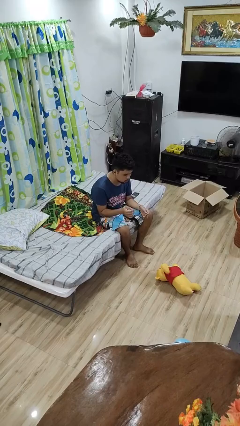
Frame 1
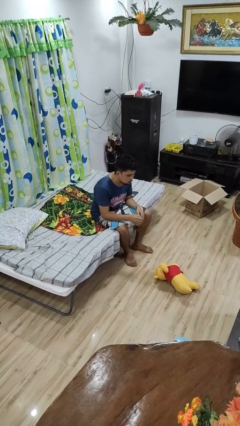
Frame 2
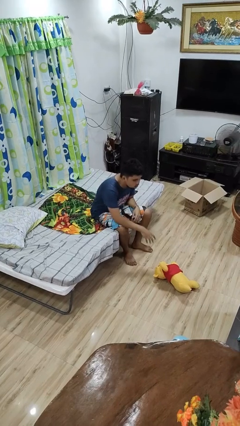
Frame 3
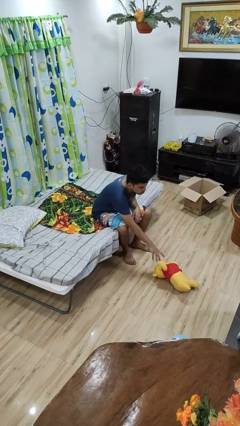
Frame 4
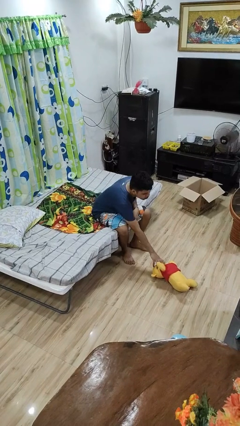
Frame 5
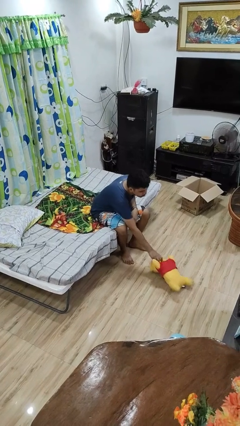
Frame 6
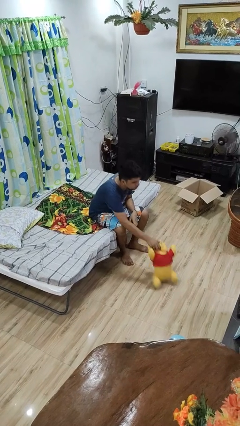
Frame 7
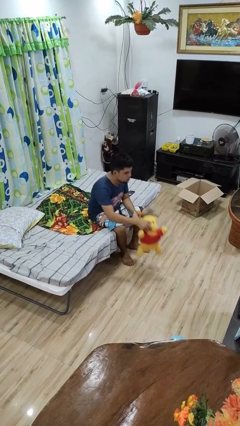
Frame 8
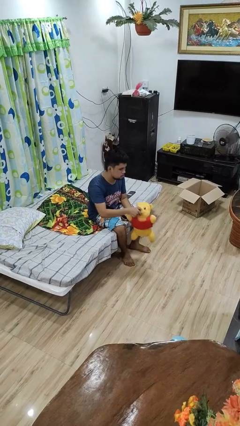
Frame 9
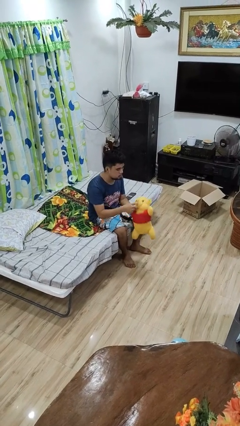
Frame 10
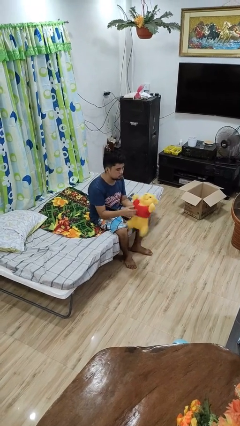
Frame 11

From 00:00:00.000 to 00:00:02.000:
person picks up object from floor

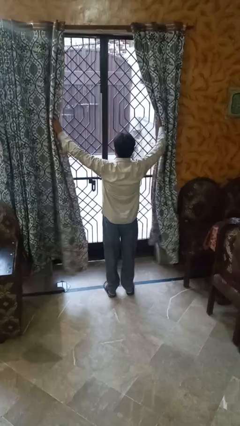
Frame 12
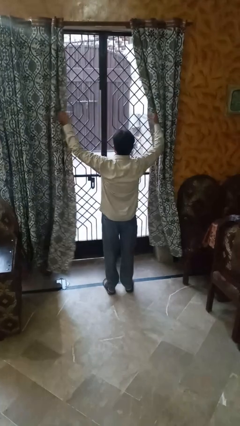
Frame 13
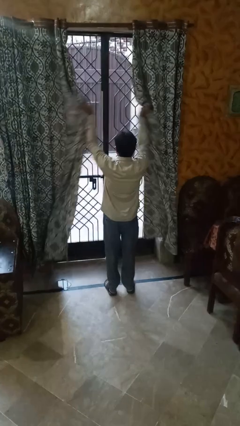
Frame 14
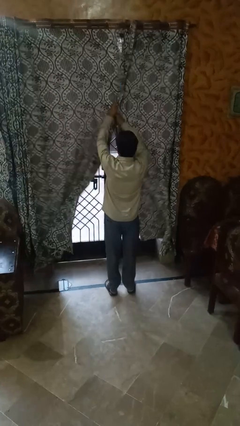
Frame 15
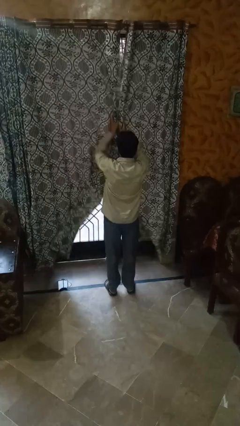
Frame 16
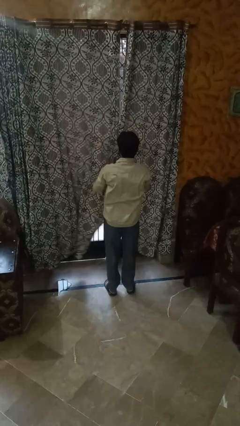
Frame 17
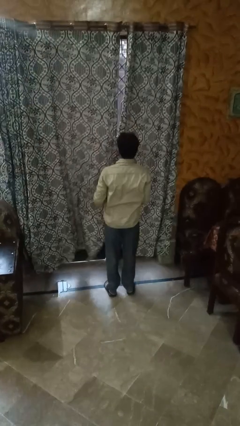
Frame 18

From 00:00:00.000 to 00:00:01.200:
person closes curtains

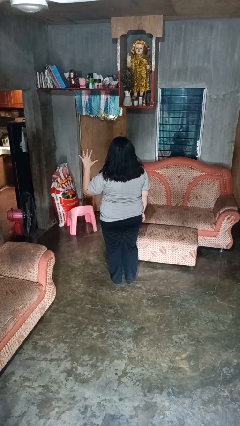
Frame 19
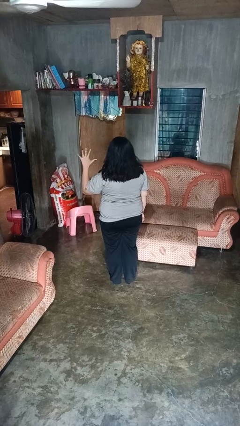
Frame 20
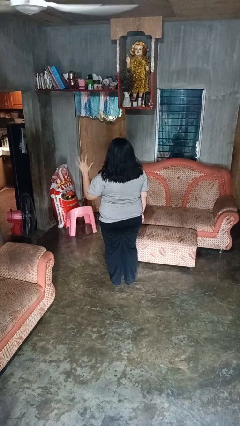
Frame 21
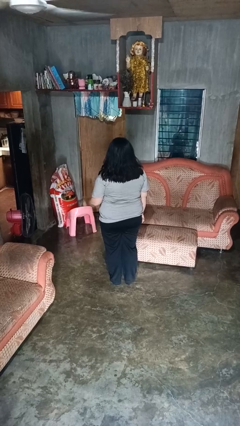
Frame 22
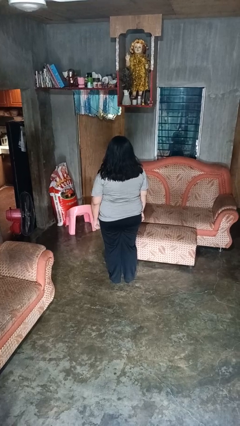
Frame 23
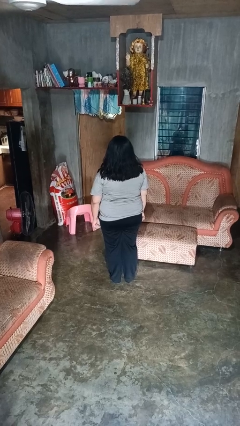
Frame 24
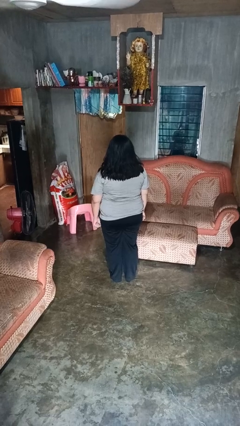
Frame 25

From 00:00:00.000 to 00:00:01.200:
person gestures number five

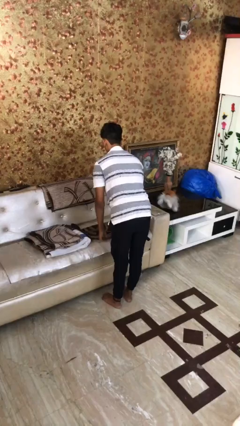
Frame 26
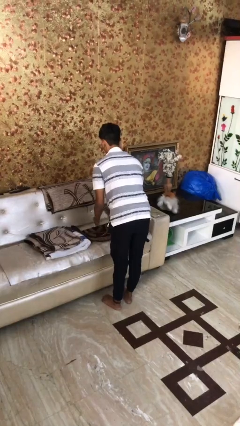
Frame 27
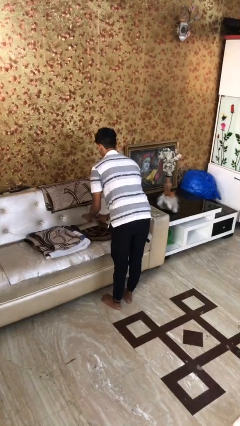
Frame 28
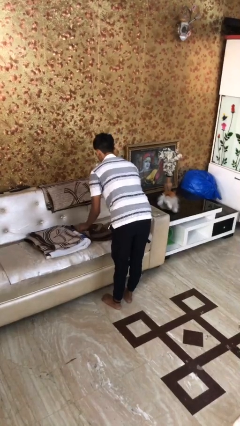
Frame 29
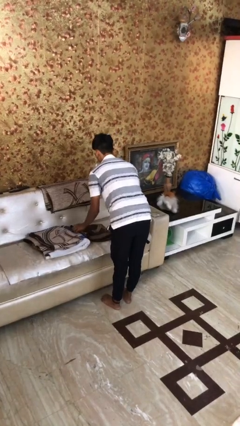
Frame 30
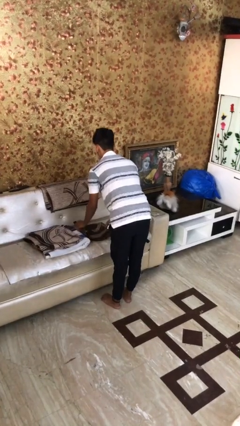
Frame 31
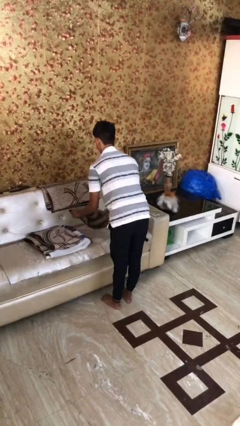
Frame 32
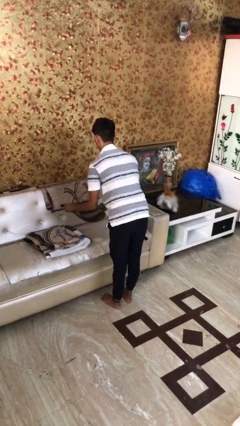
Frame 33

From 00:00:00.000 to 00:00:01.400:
person folds towel

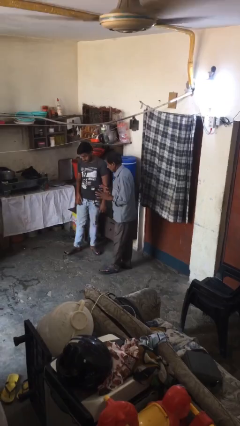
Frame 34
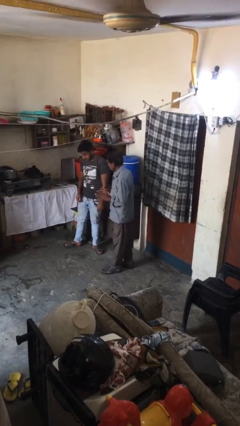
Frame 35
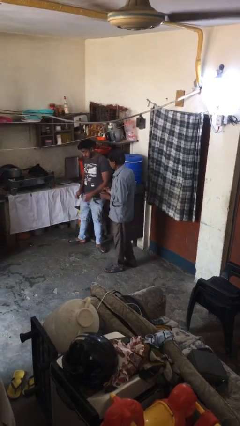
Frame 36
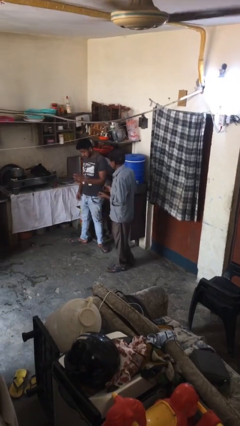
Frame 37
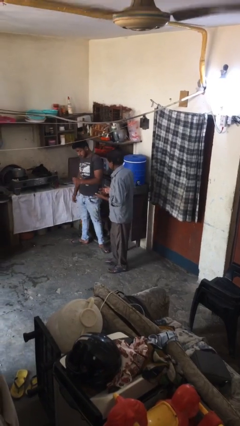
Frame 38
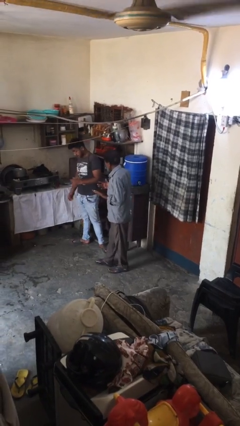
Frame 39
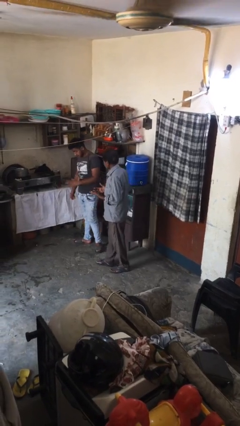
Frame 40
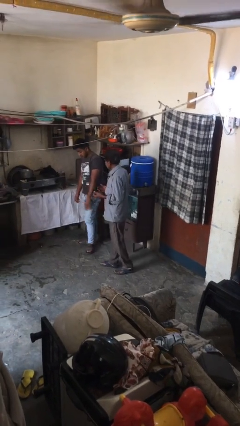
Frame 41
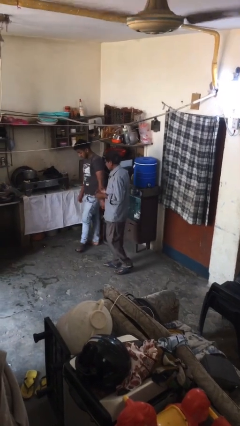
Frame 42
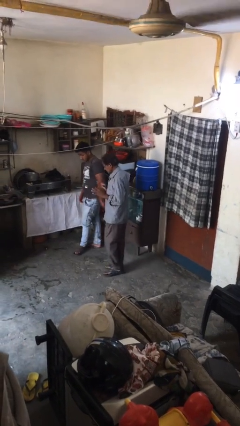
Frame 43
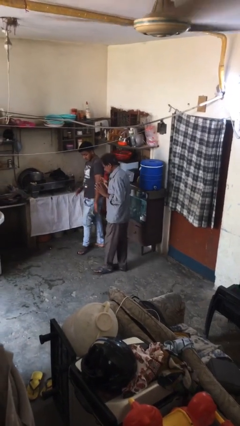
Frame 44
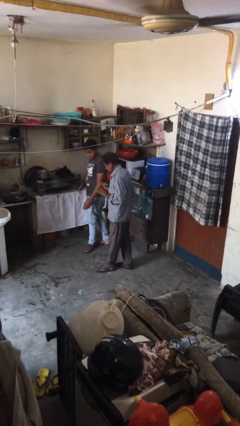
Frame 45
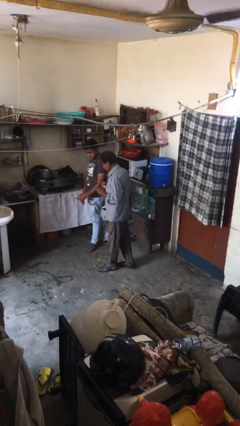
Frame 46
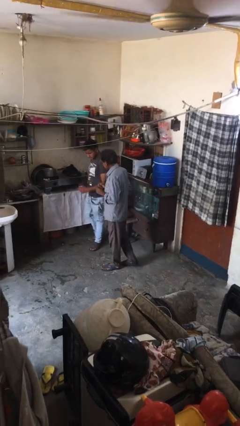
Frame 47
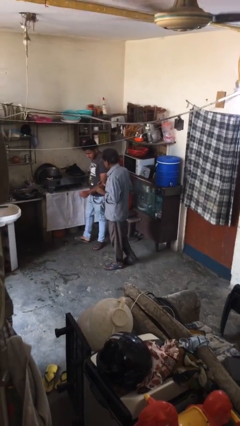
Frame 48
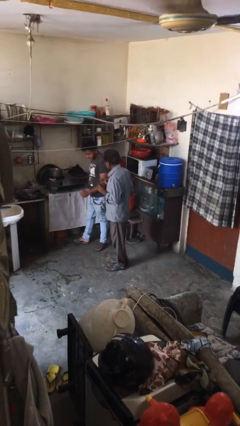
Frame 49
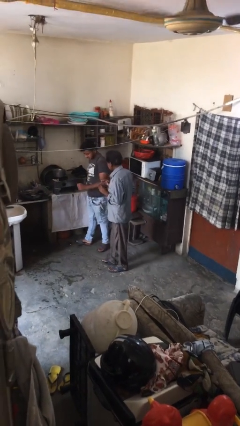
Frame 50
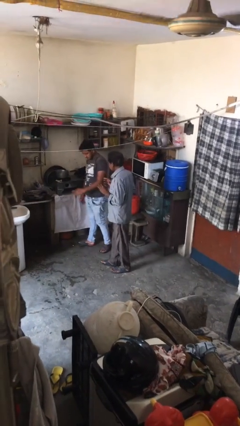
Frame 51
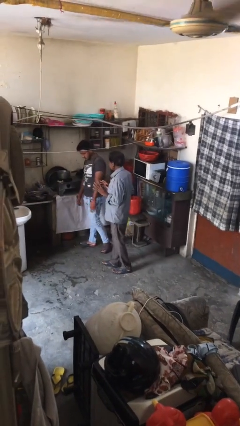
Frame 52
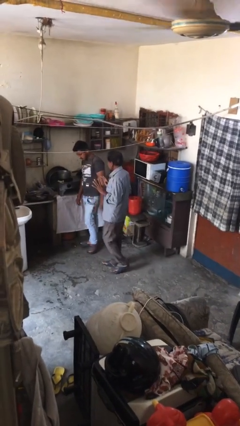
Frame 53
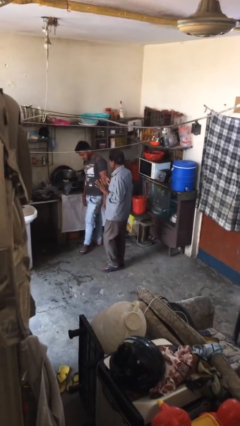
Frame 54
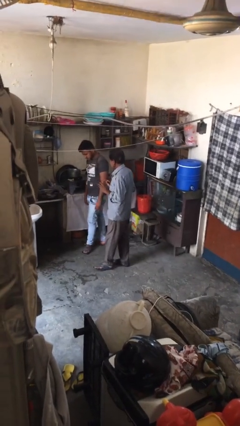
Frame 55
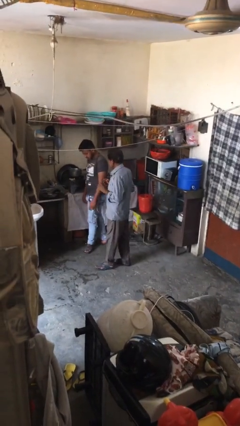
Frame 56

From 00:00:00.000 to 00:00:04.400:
person talks to person

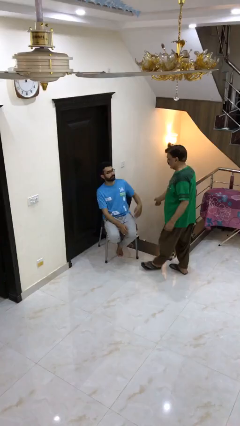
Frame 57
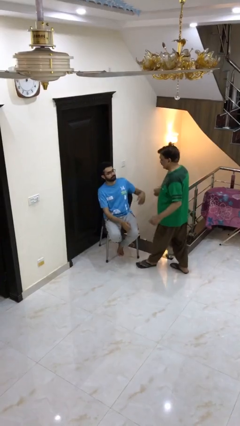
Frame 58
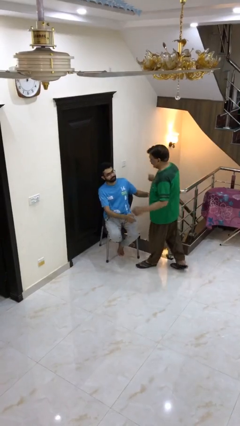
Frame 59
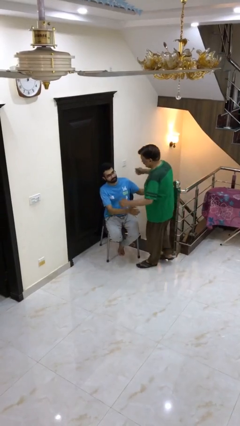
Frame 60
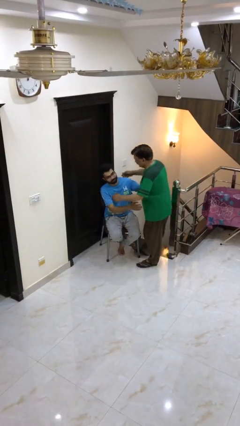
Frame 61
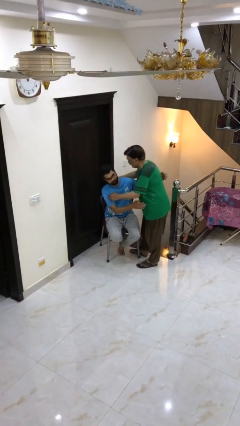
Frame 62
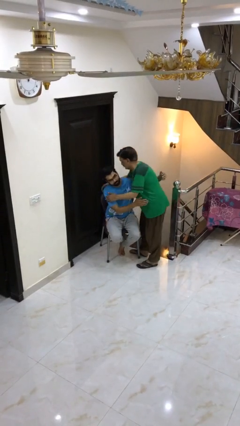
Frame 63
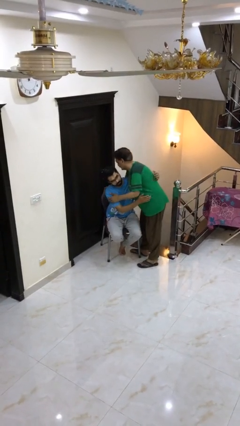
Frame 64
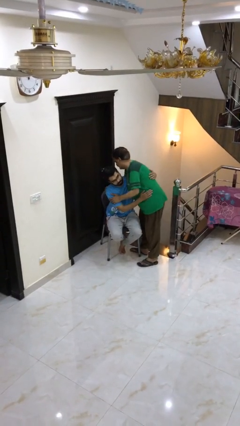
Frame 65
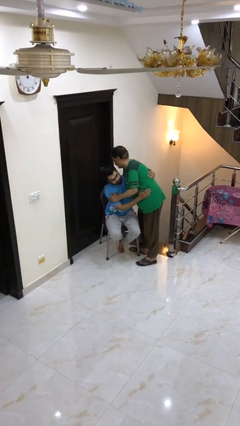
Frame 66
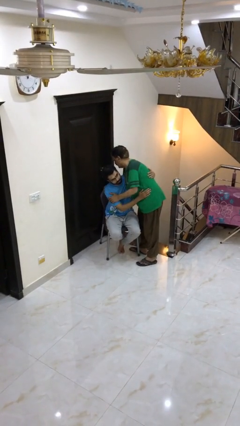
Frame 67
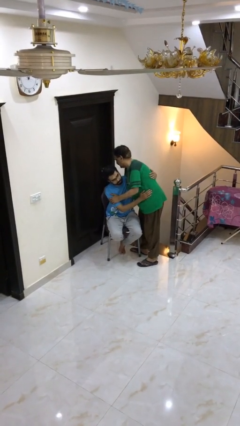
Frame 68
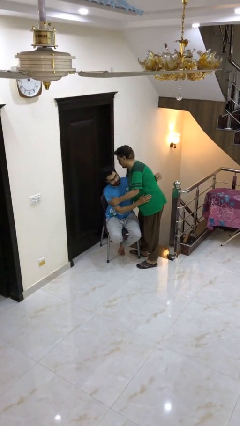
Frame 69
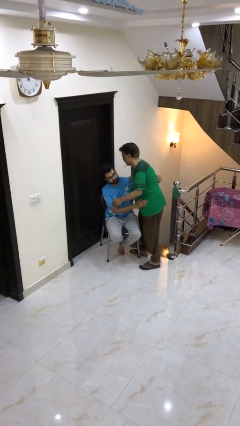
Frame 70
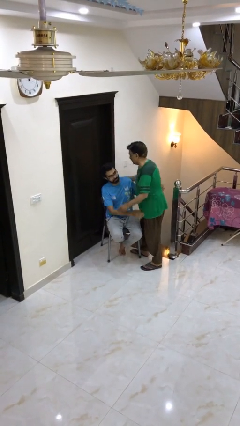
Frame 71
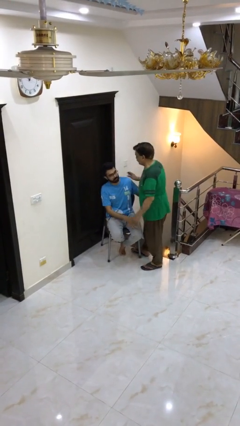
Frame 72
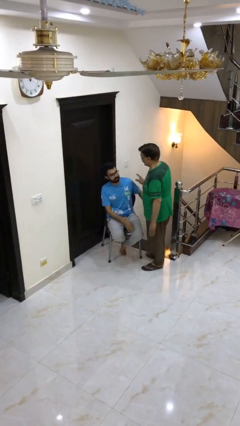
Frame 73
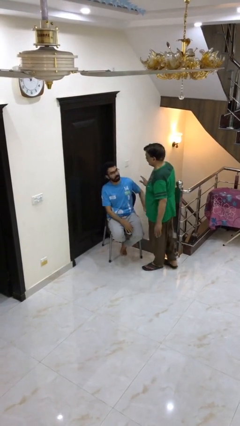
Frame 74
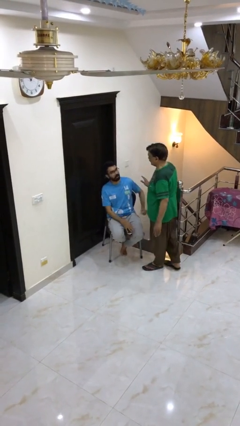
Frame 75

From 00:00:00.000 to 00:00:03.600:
person embraces person

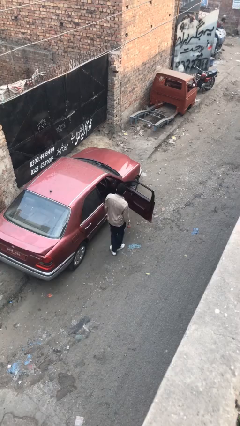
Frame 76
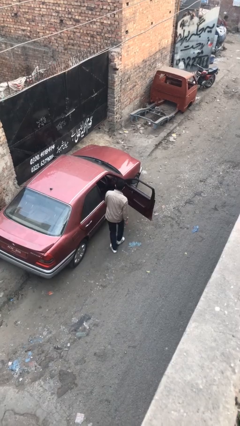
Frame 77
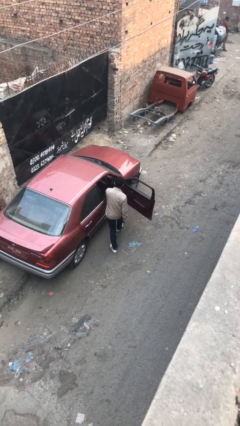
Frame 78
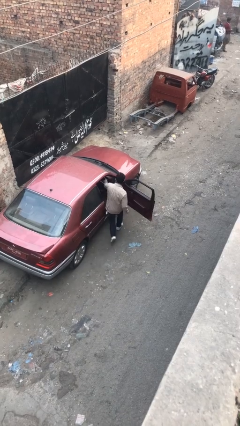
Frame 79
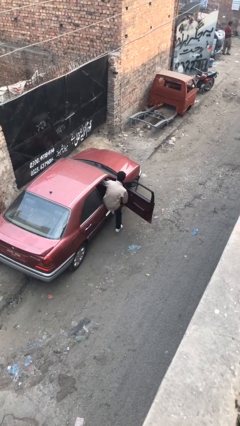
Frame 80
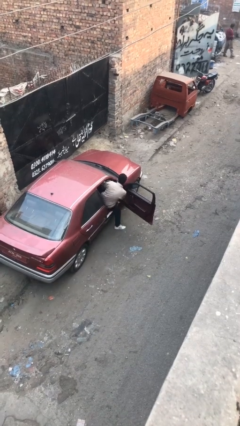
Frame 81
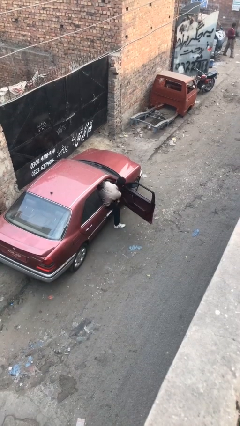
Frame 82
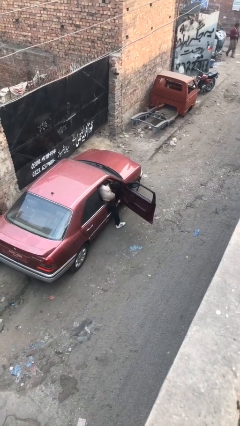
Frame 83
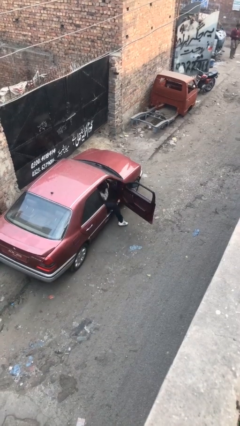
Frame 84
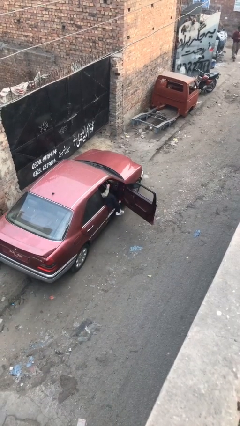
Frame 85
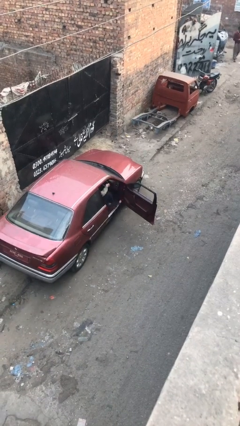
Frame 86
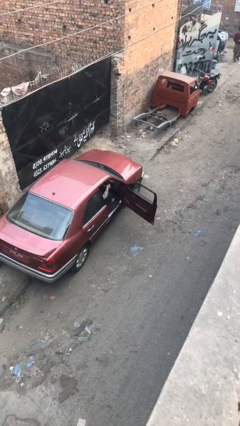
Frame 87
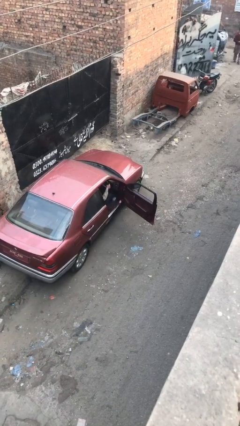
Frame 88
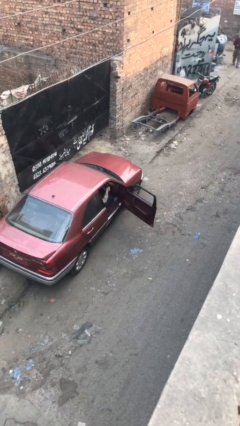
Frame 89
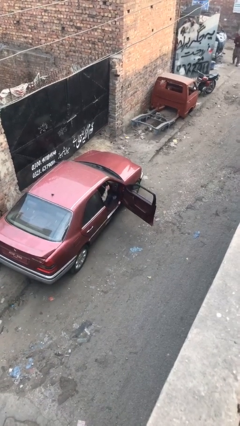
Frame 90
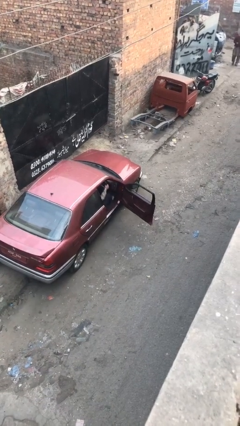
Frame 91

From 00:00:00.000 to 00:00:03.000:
person enters car

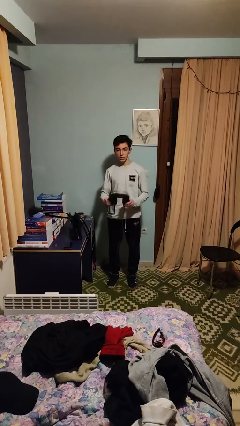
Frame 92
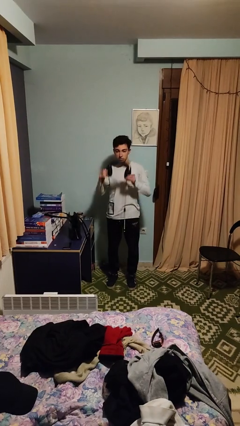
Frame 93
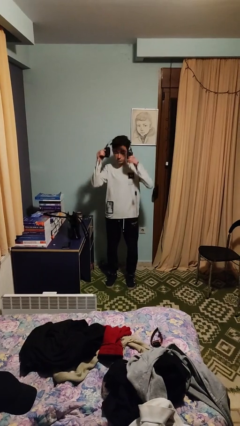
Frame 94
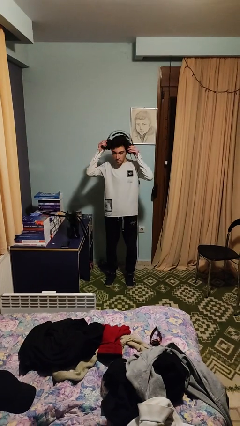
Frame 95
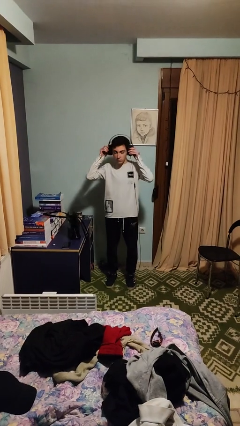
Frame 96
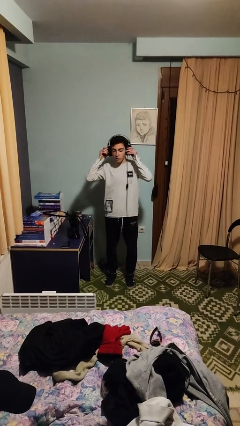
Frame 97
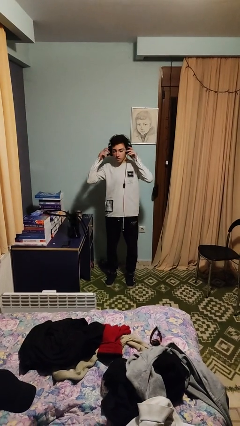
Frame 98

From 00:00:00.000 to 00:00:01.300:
person puts on headphones
